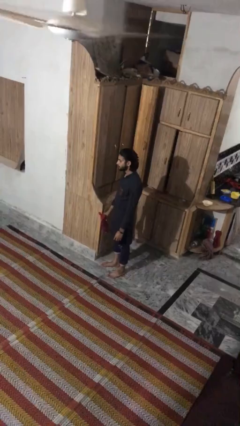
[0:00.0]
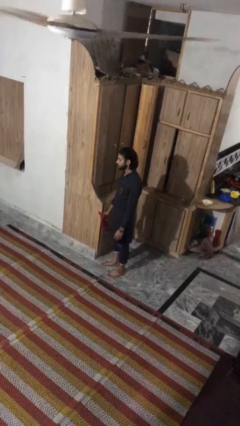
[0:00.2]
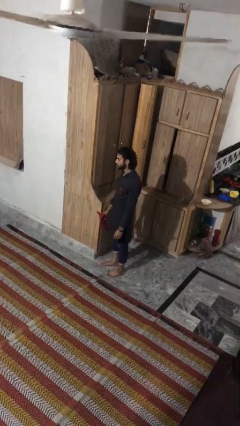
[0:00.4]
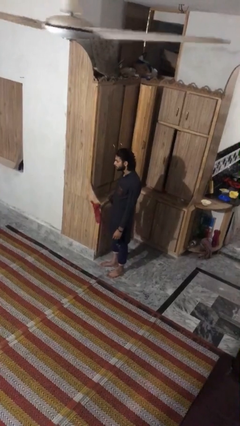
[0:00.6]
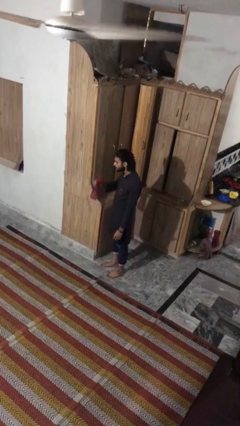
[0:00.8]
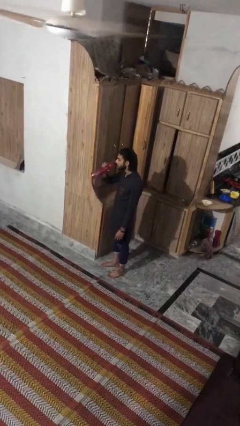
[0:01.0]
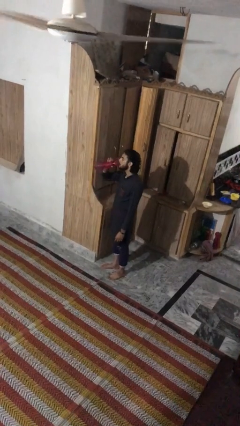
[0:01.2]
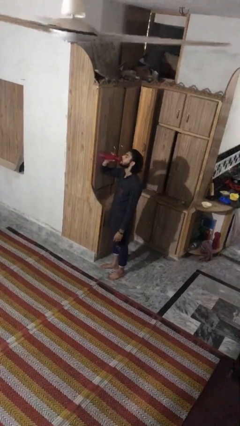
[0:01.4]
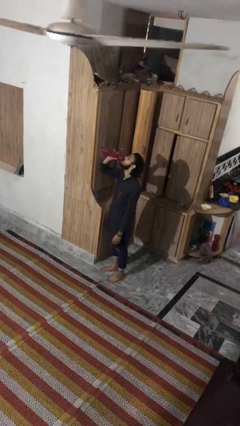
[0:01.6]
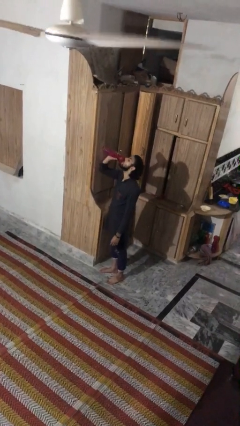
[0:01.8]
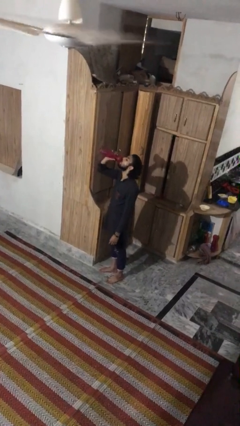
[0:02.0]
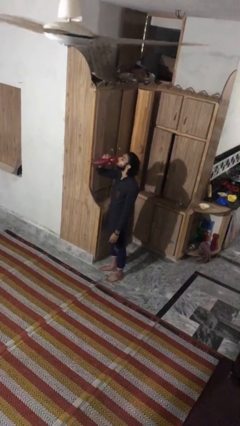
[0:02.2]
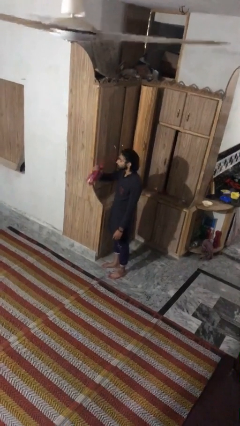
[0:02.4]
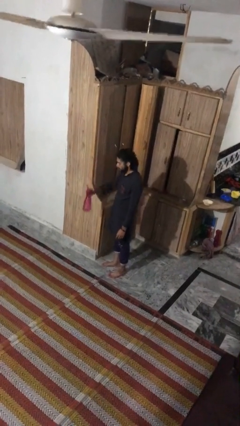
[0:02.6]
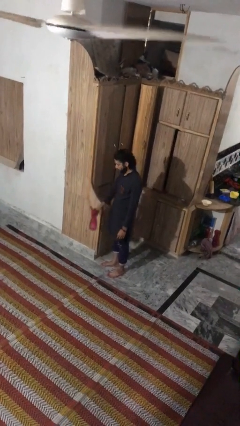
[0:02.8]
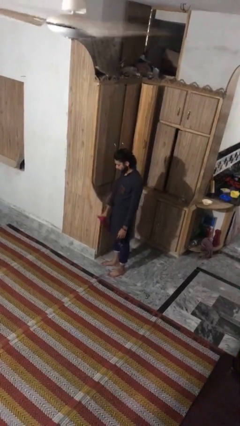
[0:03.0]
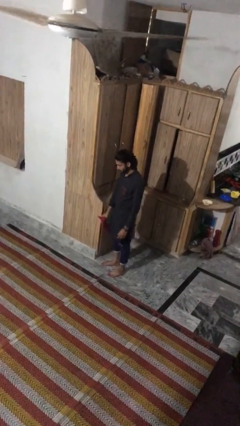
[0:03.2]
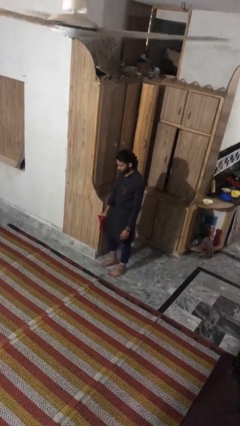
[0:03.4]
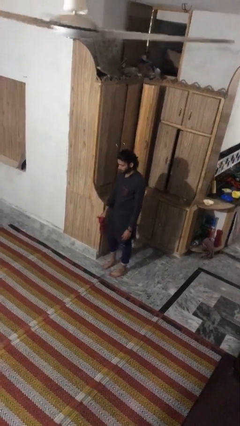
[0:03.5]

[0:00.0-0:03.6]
person drinks from bottle

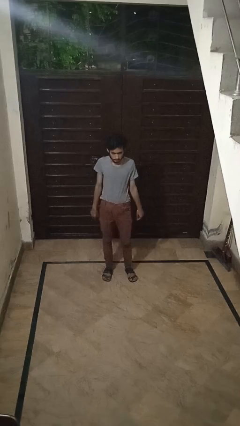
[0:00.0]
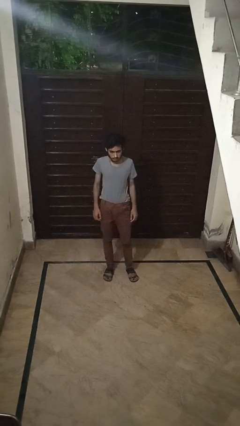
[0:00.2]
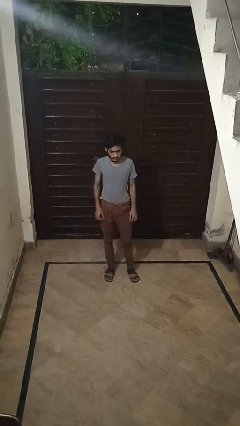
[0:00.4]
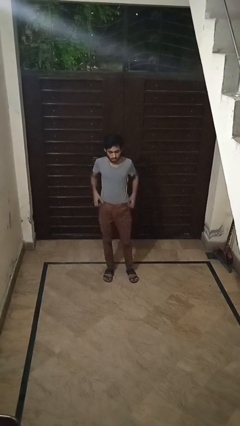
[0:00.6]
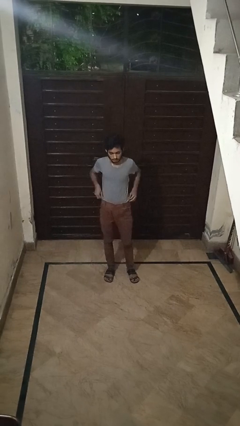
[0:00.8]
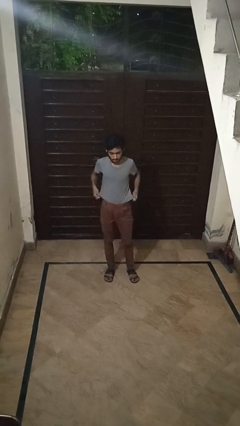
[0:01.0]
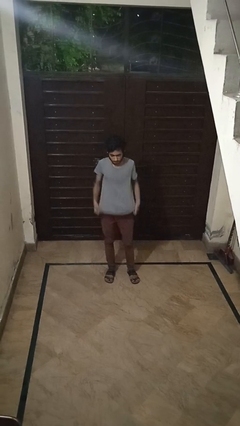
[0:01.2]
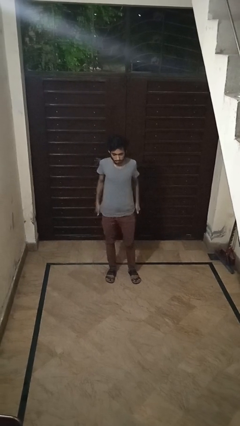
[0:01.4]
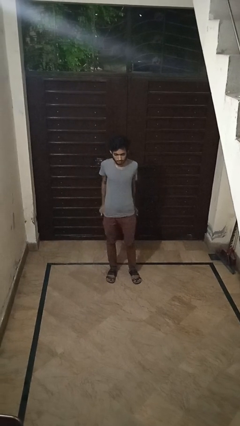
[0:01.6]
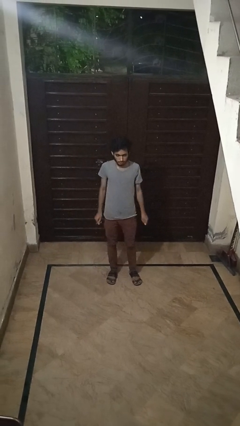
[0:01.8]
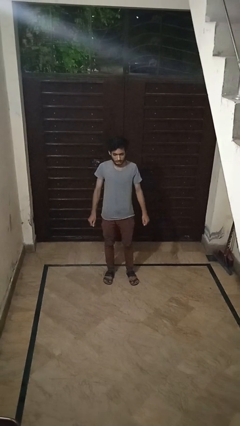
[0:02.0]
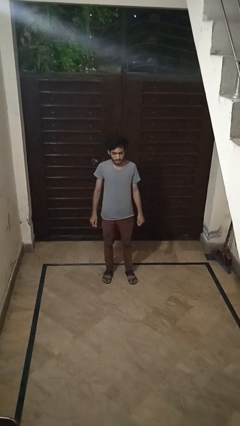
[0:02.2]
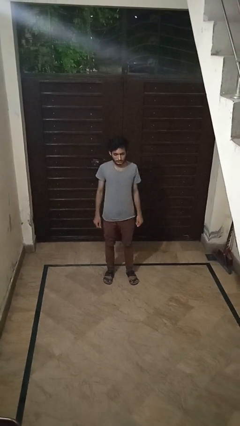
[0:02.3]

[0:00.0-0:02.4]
person untucks shirt

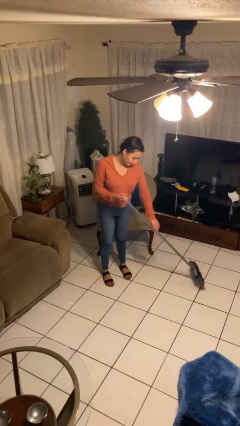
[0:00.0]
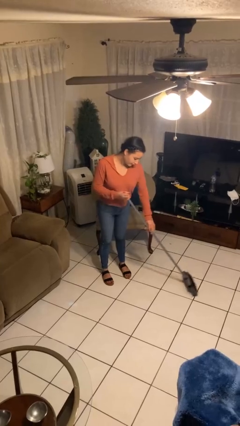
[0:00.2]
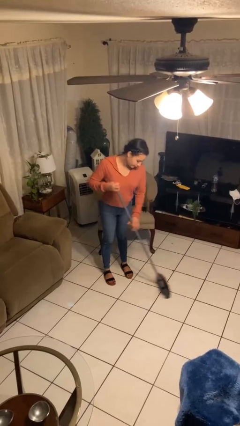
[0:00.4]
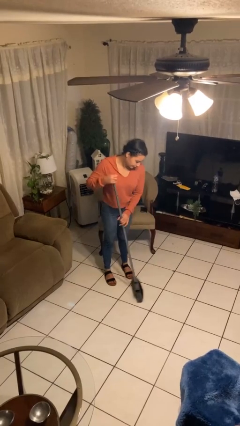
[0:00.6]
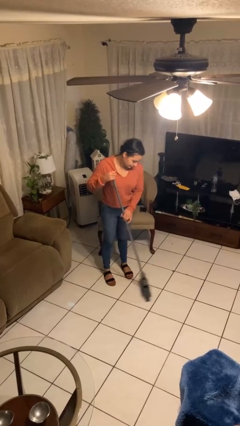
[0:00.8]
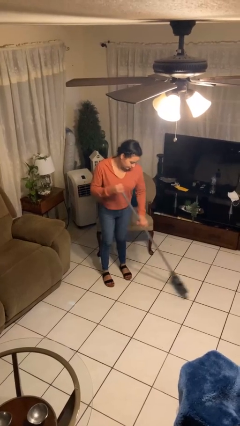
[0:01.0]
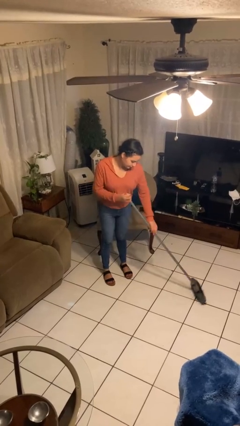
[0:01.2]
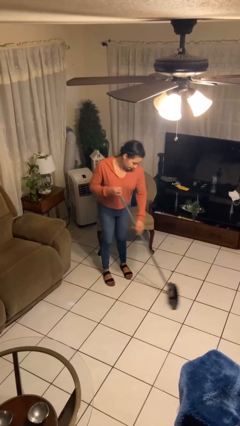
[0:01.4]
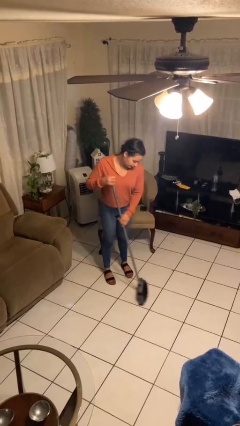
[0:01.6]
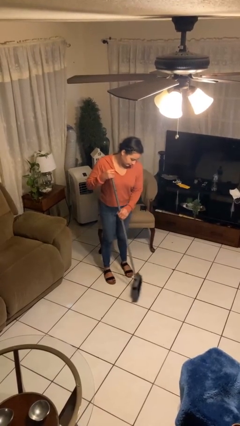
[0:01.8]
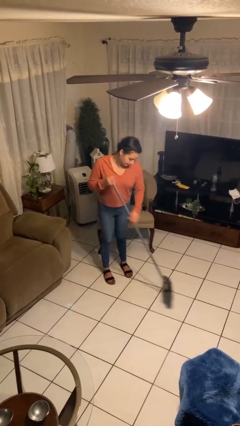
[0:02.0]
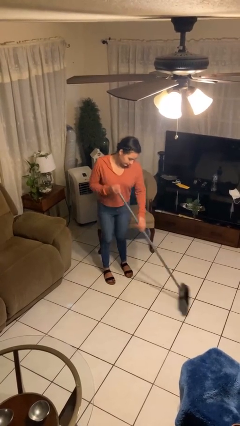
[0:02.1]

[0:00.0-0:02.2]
person sweeps floor

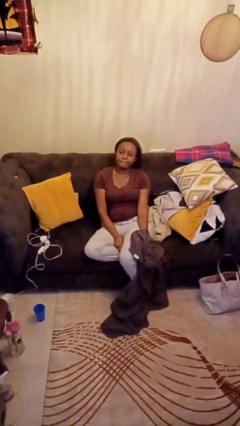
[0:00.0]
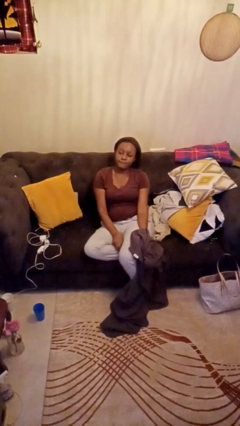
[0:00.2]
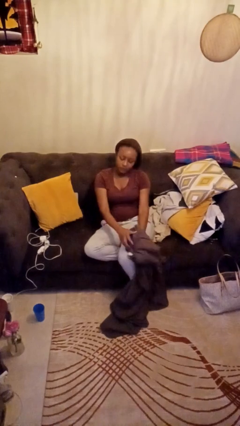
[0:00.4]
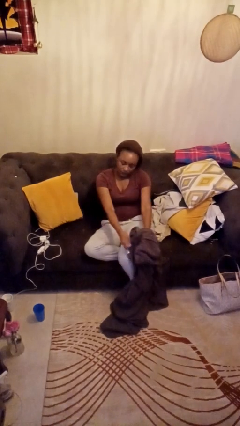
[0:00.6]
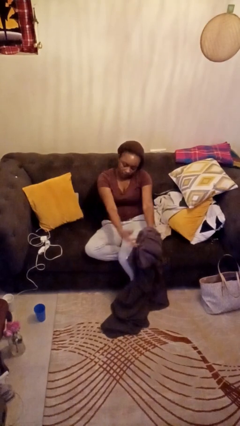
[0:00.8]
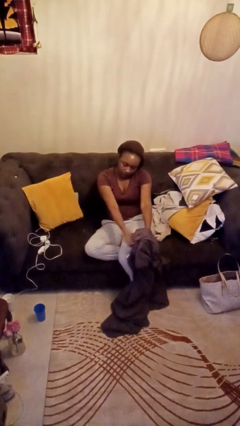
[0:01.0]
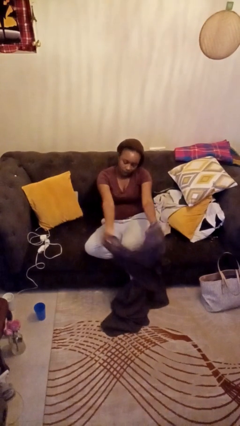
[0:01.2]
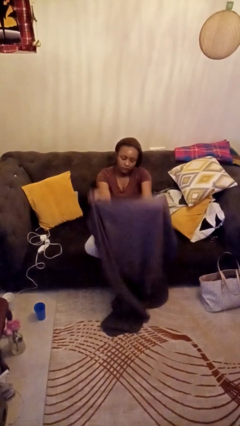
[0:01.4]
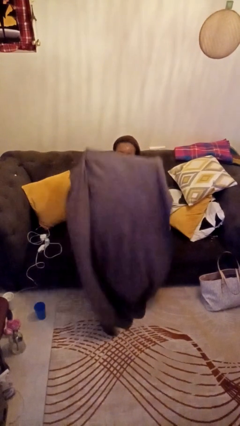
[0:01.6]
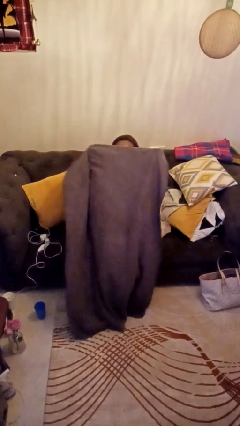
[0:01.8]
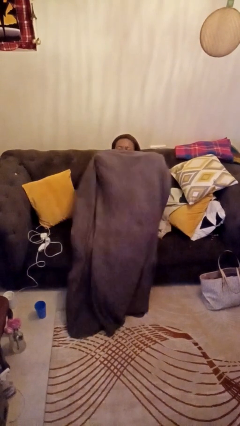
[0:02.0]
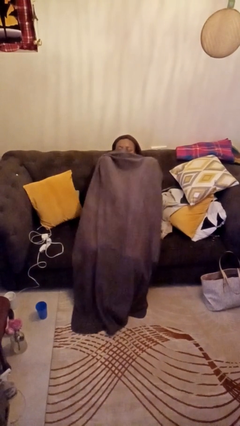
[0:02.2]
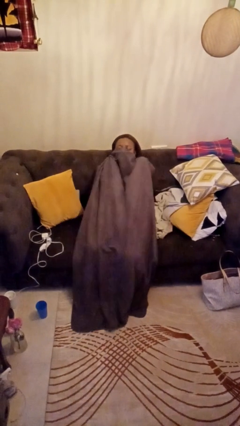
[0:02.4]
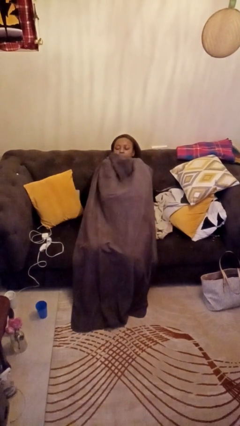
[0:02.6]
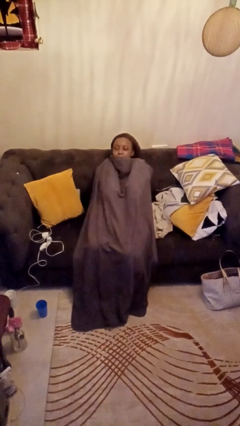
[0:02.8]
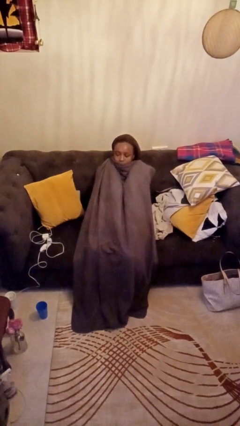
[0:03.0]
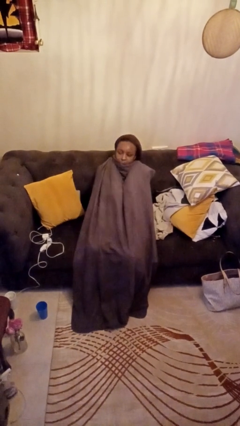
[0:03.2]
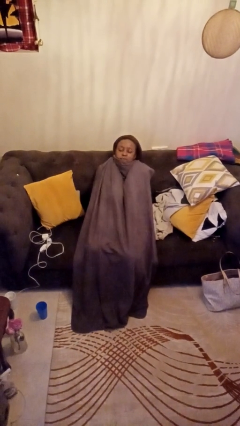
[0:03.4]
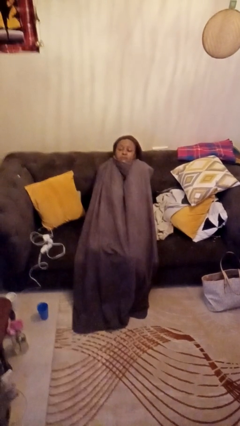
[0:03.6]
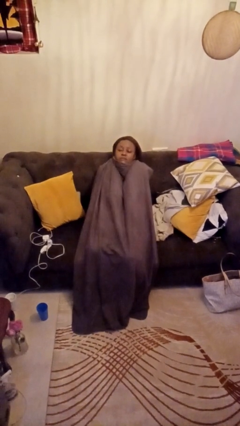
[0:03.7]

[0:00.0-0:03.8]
person covers with blanket

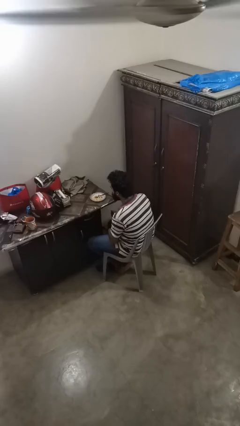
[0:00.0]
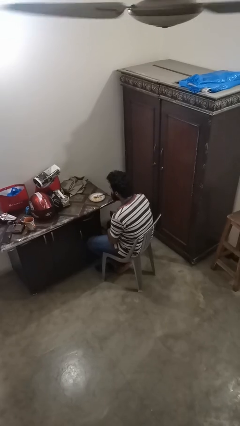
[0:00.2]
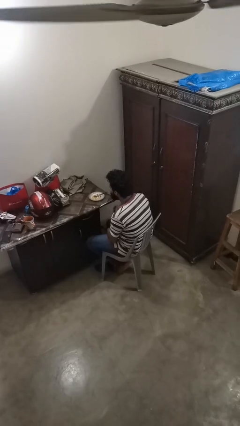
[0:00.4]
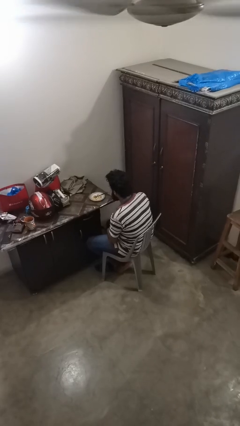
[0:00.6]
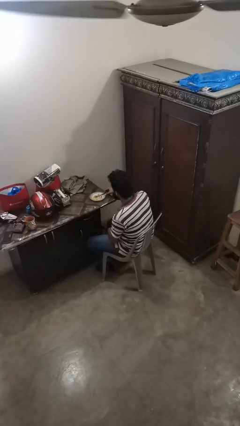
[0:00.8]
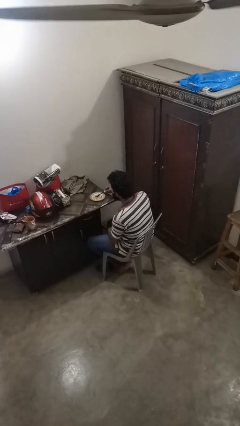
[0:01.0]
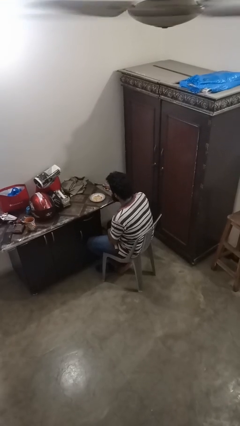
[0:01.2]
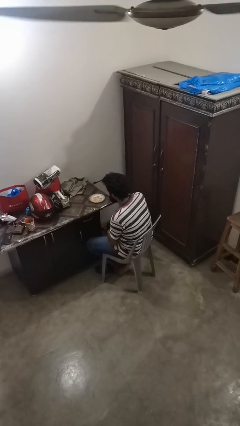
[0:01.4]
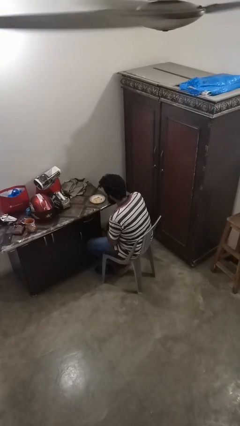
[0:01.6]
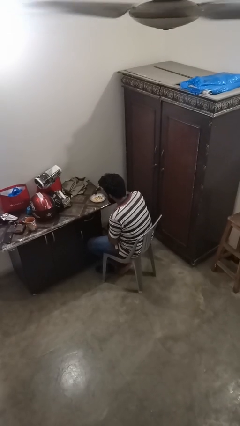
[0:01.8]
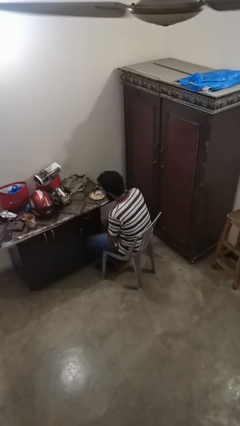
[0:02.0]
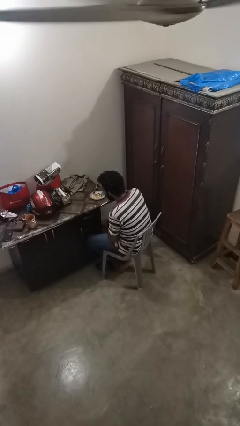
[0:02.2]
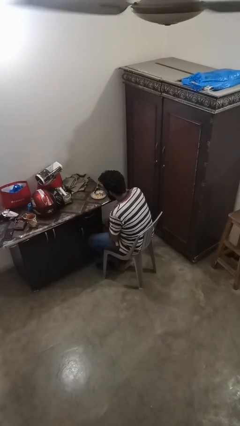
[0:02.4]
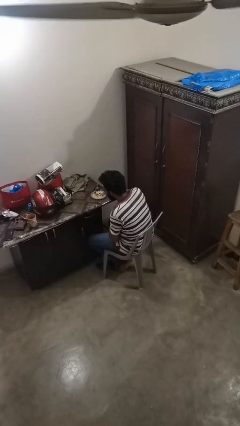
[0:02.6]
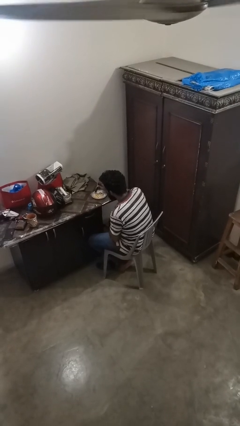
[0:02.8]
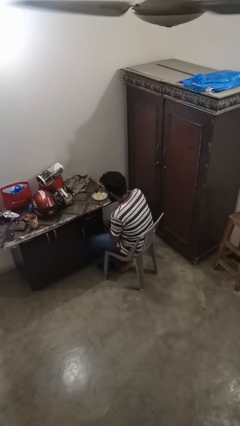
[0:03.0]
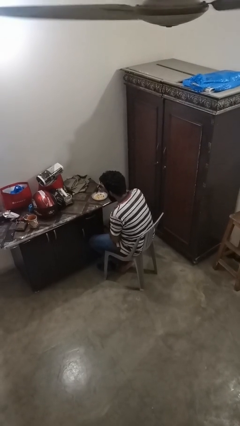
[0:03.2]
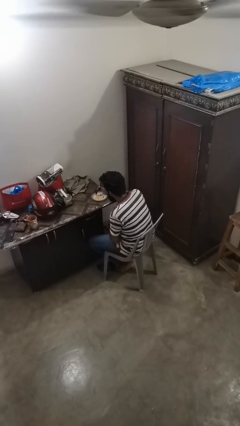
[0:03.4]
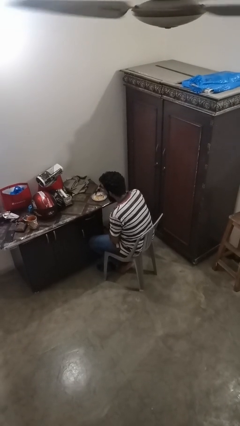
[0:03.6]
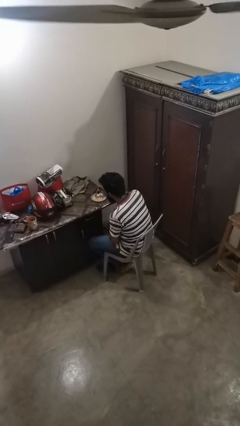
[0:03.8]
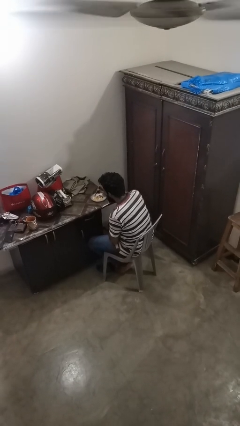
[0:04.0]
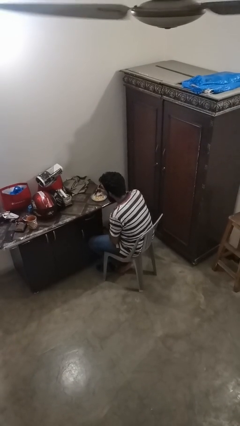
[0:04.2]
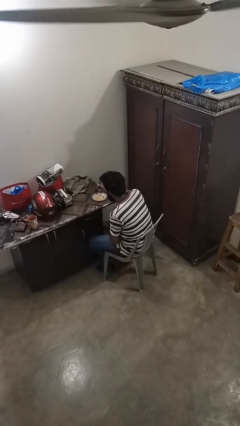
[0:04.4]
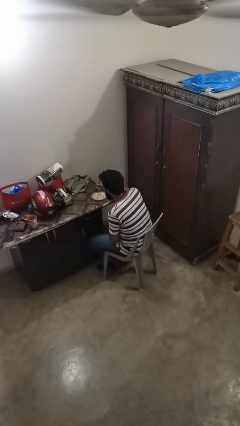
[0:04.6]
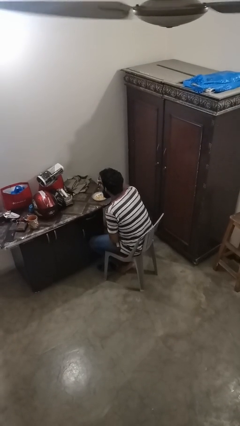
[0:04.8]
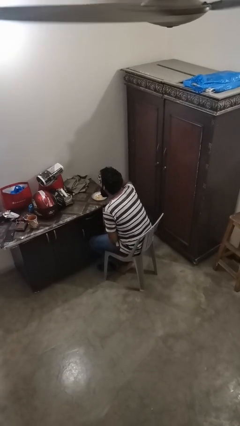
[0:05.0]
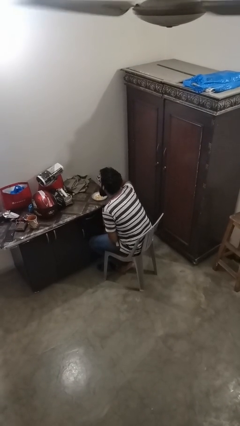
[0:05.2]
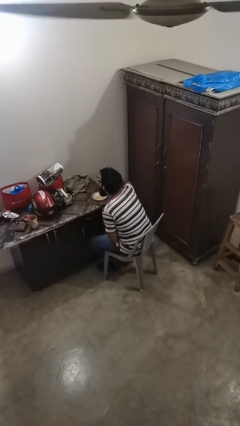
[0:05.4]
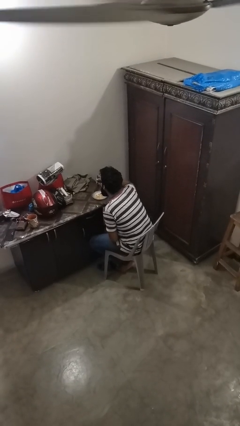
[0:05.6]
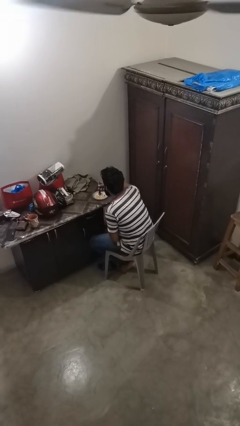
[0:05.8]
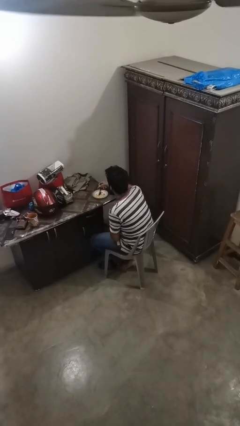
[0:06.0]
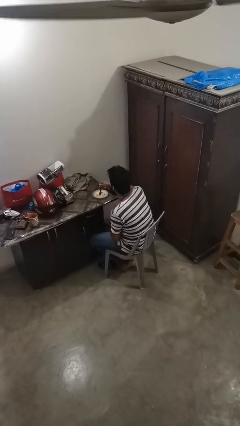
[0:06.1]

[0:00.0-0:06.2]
person eats with utensil
